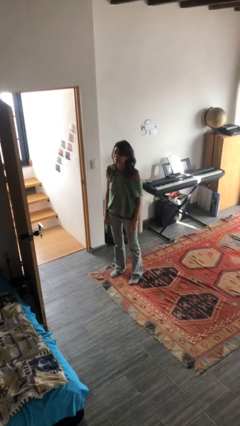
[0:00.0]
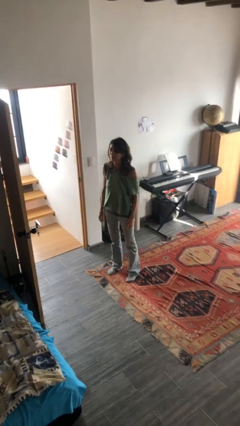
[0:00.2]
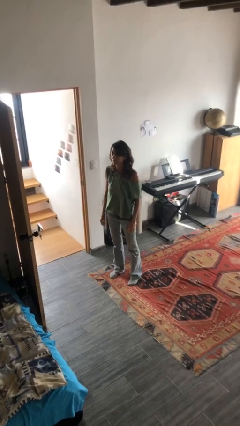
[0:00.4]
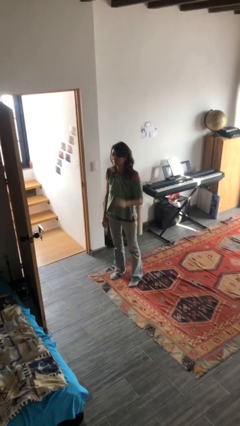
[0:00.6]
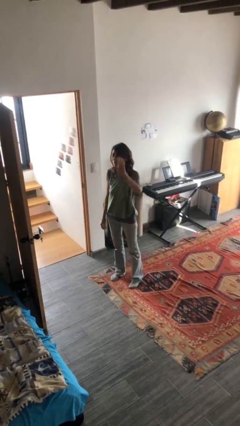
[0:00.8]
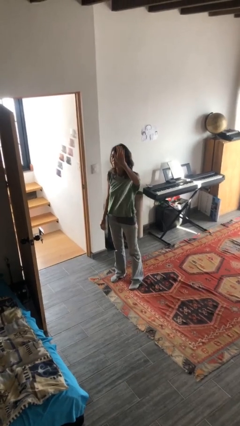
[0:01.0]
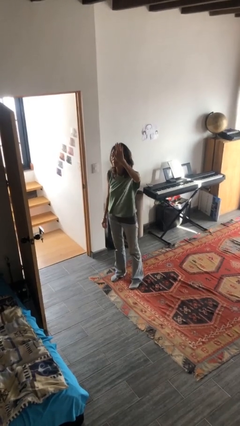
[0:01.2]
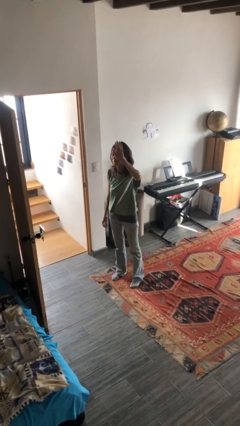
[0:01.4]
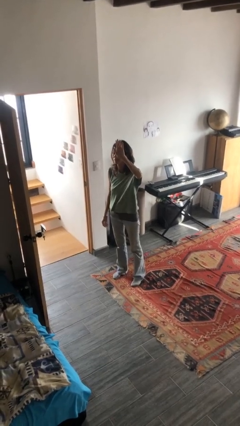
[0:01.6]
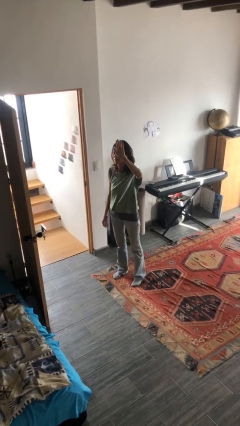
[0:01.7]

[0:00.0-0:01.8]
person gestures raise hand

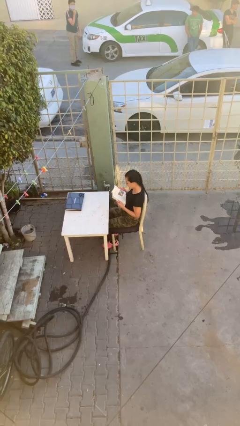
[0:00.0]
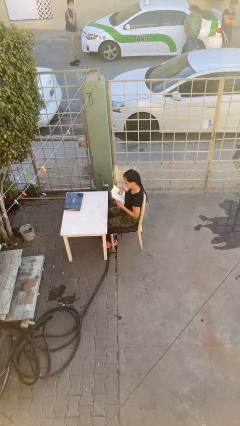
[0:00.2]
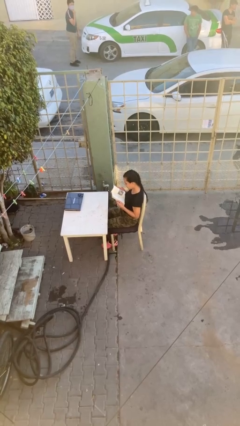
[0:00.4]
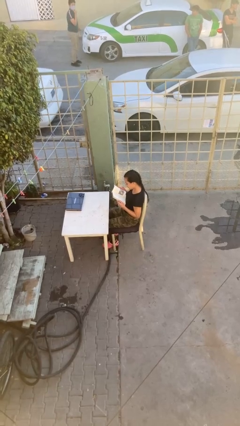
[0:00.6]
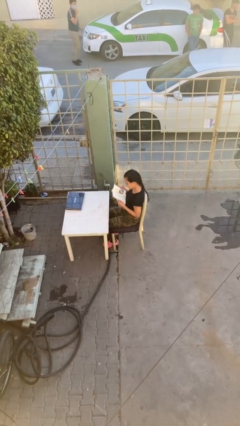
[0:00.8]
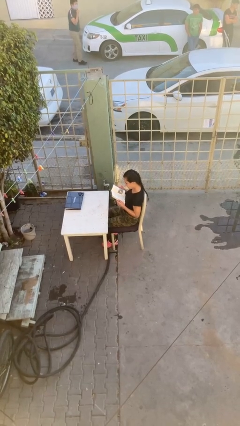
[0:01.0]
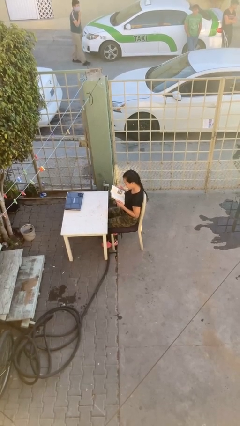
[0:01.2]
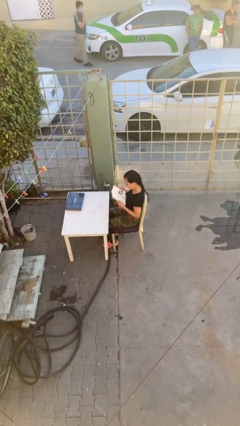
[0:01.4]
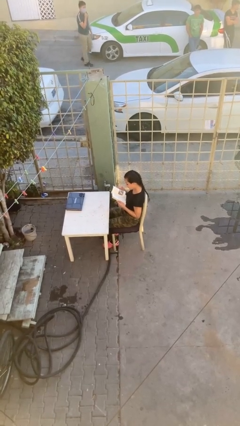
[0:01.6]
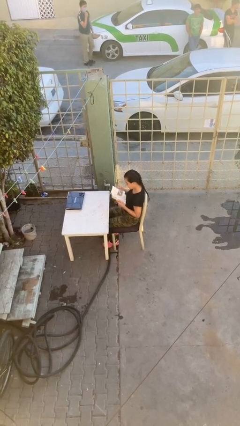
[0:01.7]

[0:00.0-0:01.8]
person reads document

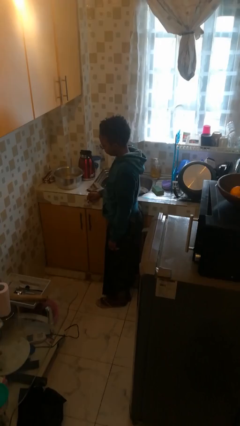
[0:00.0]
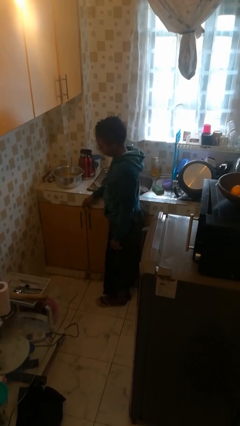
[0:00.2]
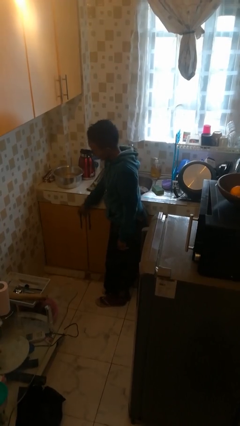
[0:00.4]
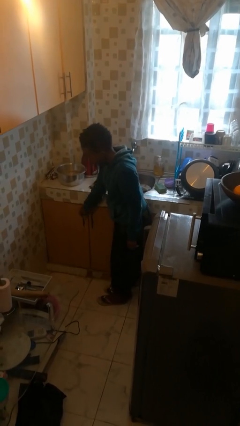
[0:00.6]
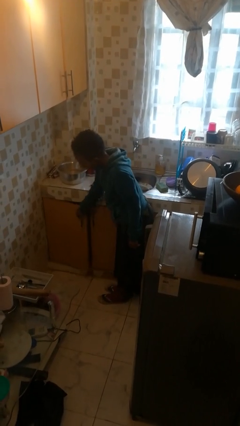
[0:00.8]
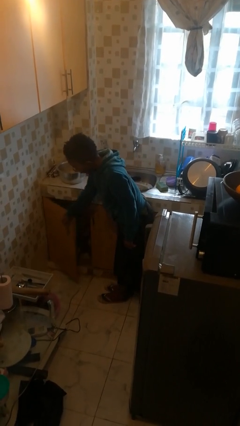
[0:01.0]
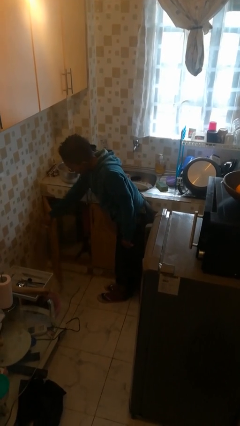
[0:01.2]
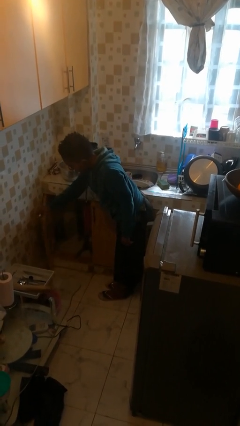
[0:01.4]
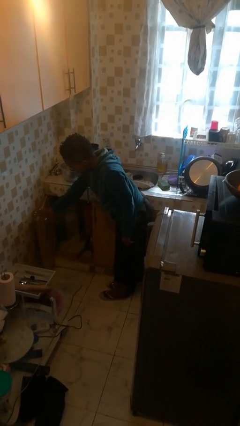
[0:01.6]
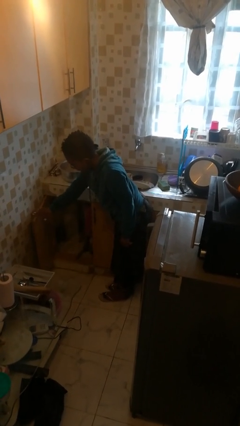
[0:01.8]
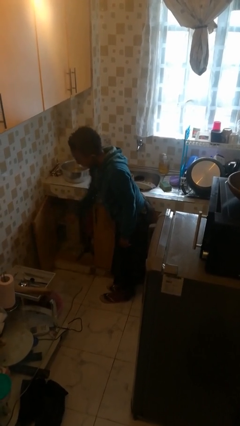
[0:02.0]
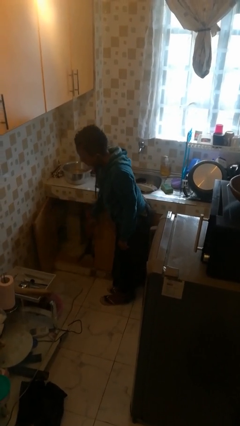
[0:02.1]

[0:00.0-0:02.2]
person opens cabinet

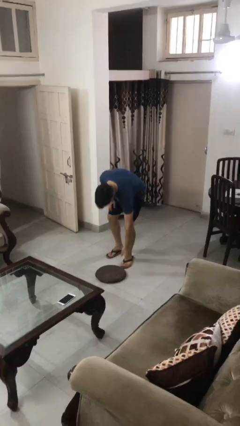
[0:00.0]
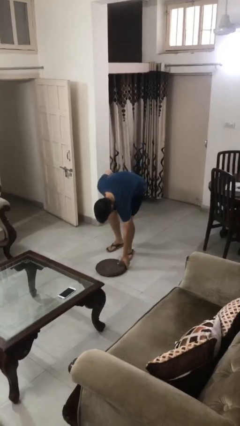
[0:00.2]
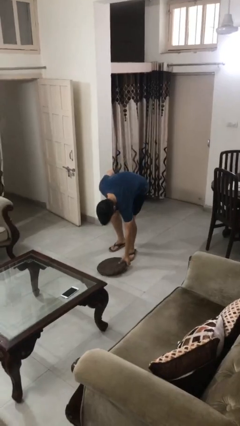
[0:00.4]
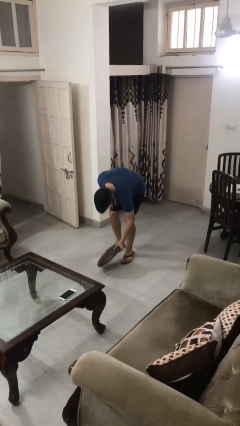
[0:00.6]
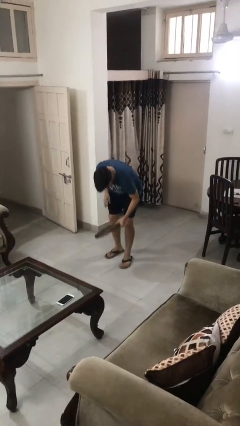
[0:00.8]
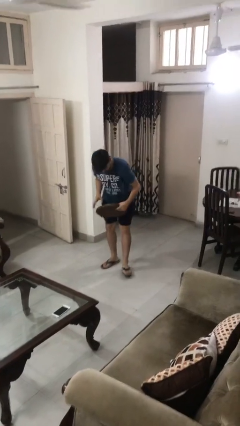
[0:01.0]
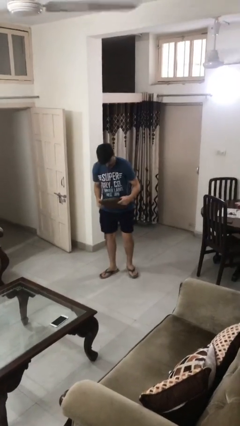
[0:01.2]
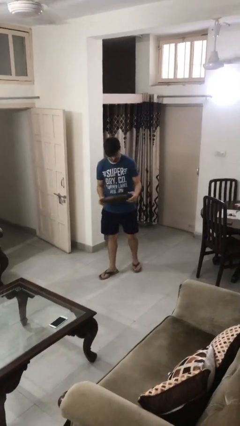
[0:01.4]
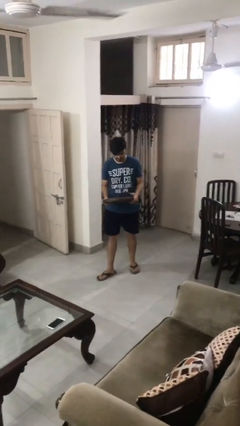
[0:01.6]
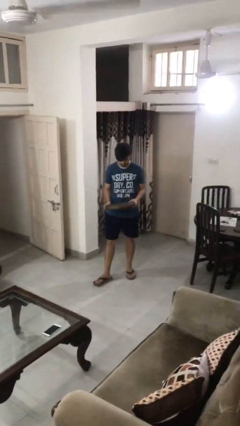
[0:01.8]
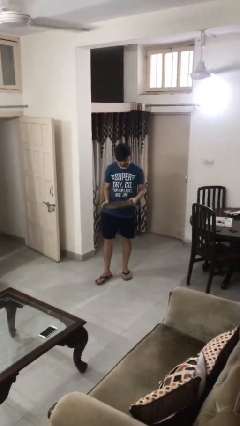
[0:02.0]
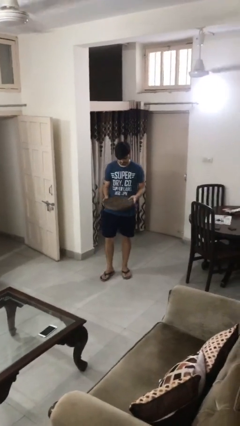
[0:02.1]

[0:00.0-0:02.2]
person picks up object from floor

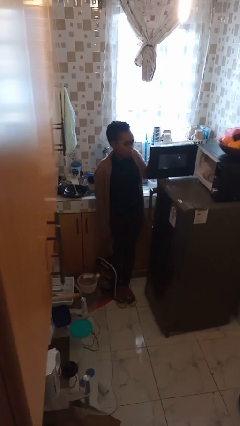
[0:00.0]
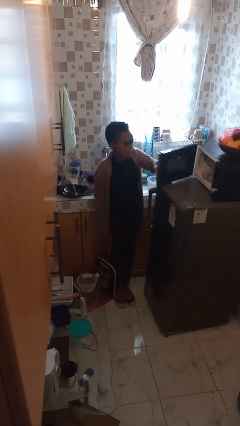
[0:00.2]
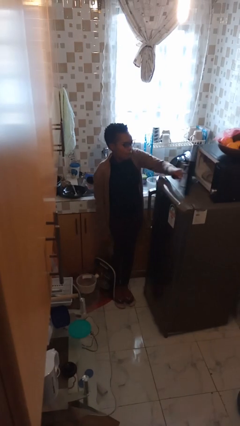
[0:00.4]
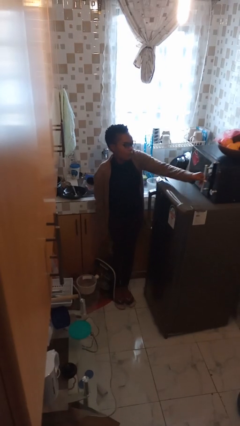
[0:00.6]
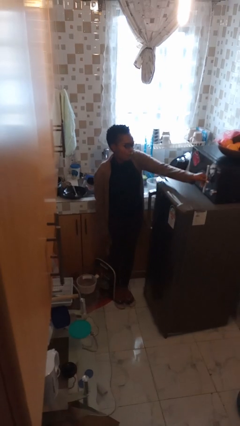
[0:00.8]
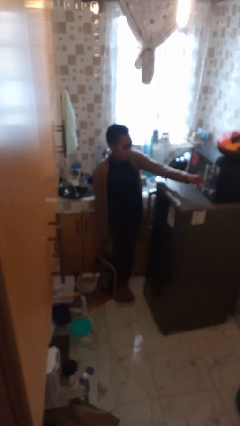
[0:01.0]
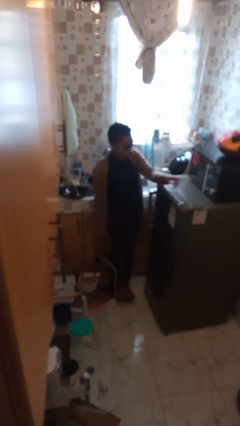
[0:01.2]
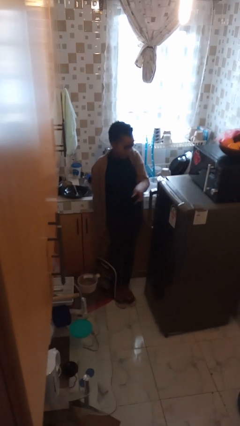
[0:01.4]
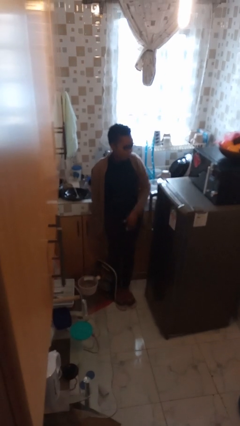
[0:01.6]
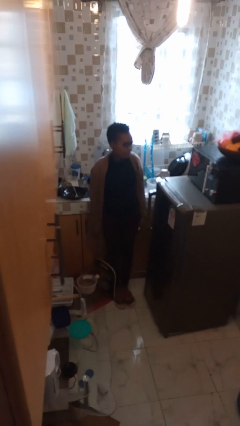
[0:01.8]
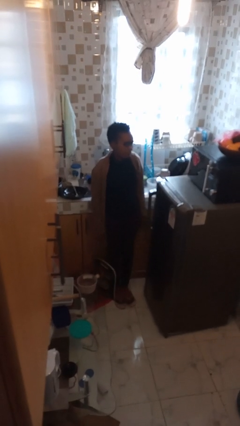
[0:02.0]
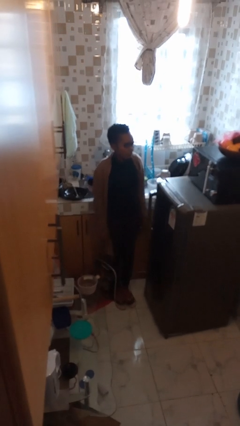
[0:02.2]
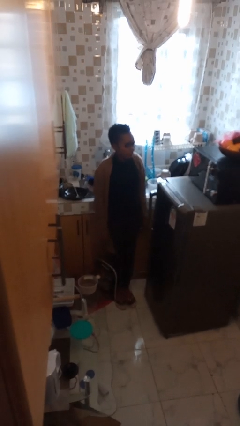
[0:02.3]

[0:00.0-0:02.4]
person closes microwave

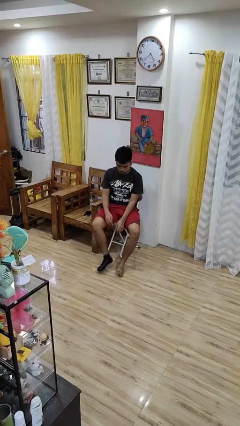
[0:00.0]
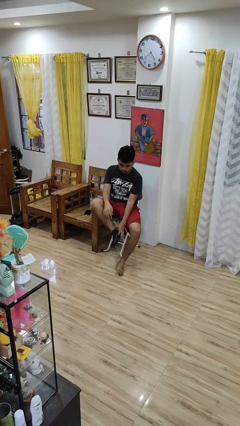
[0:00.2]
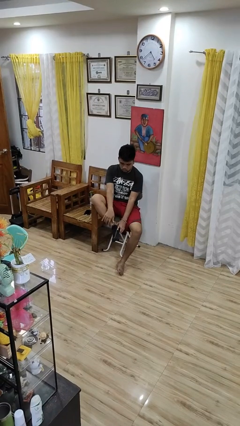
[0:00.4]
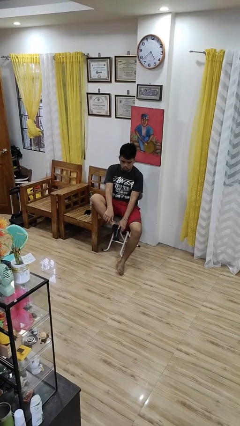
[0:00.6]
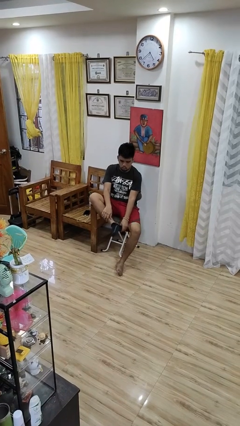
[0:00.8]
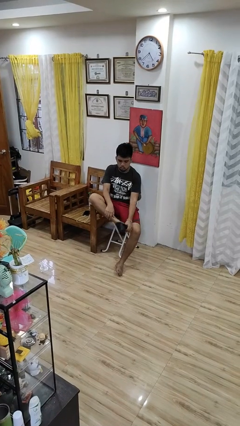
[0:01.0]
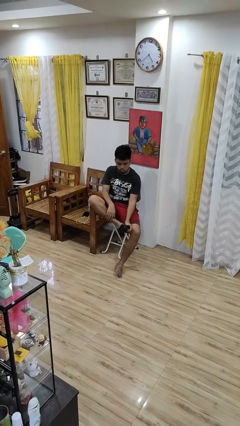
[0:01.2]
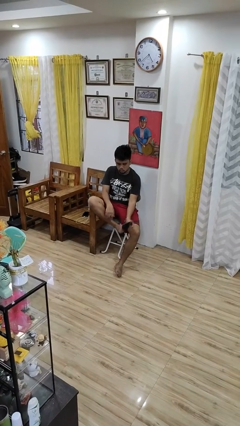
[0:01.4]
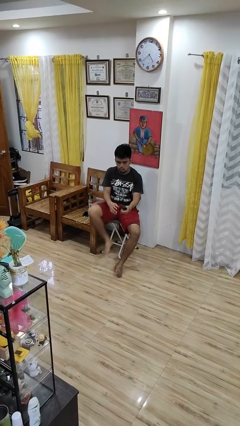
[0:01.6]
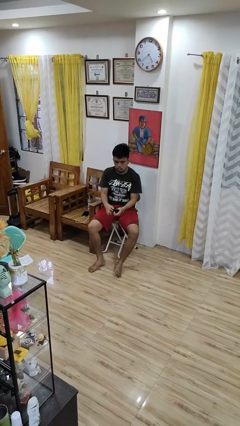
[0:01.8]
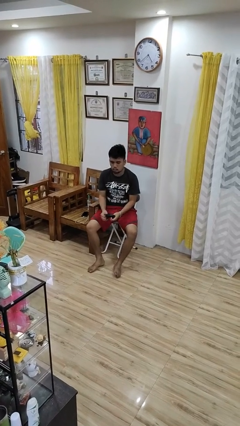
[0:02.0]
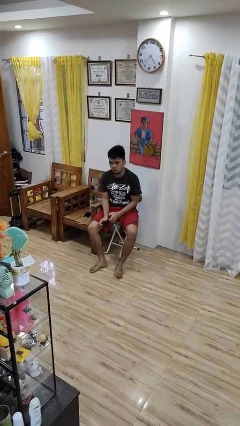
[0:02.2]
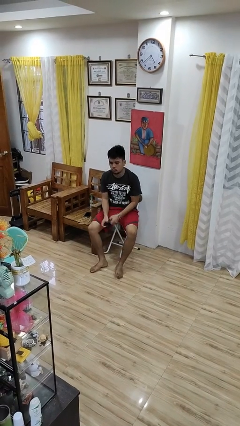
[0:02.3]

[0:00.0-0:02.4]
person takes off socks

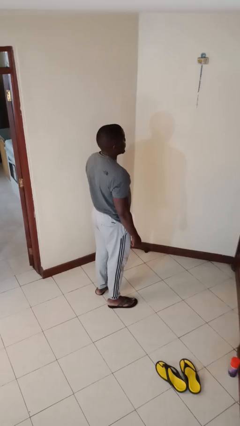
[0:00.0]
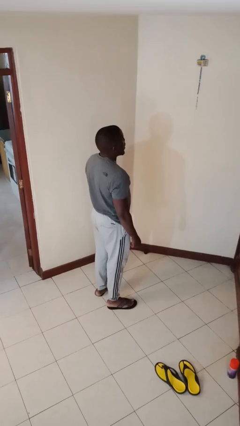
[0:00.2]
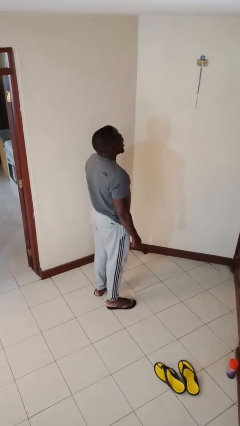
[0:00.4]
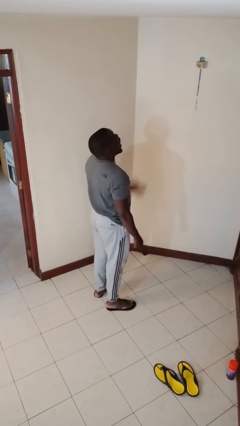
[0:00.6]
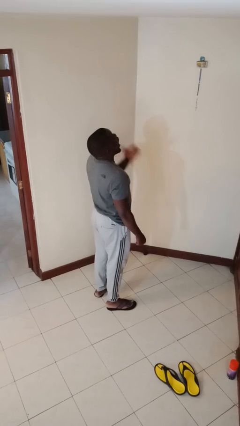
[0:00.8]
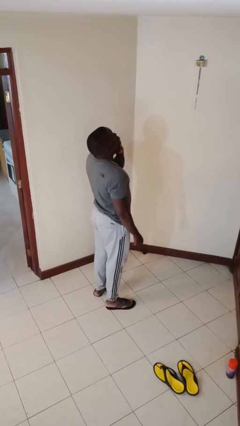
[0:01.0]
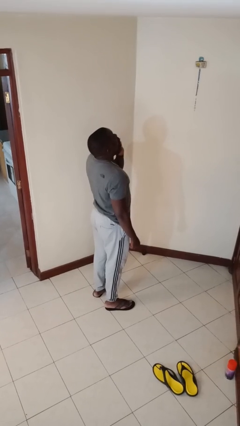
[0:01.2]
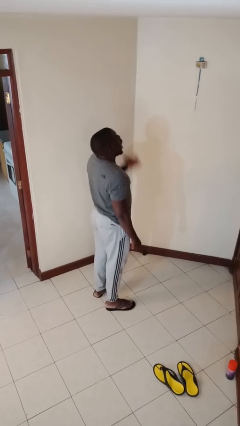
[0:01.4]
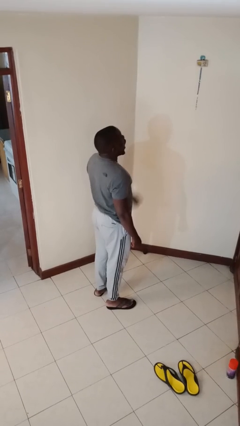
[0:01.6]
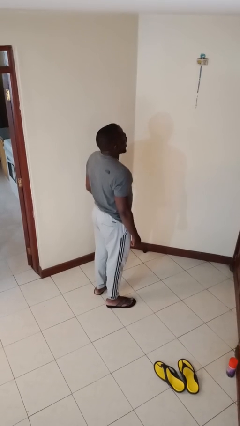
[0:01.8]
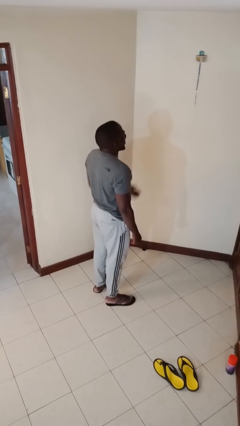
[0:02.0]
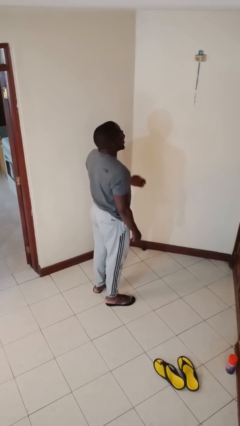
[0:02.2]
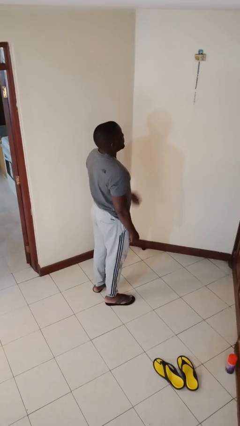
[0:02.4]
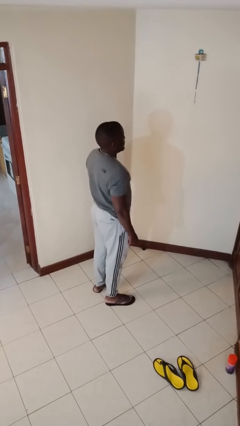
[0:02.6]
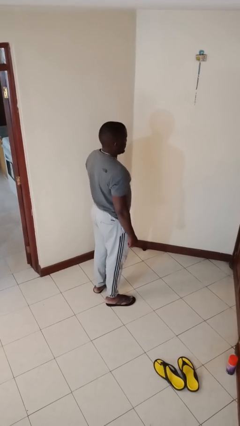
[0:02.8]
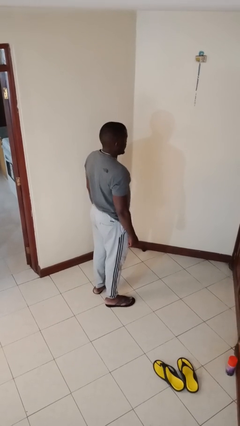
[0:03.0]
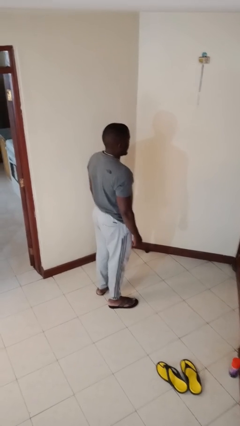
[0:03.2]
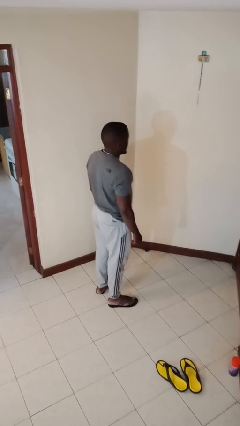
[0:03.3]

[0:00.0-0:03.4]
person yawns

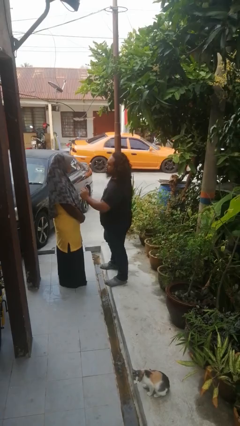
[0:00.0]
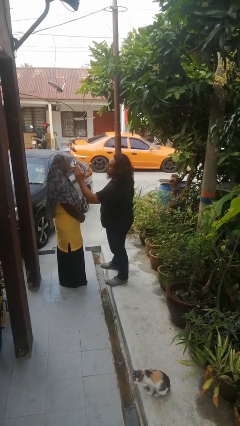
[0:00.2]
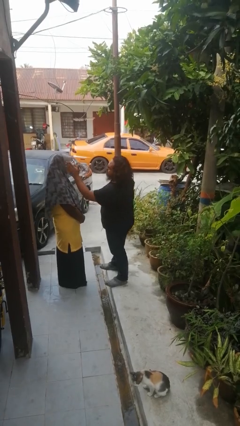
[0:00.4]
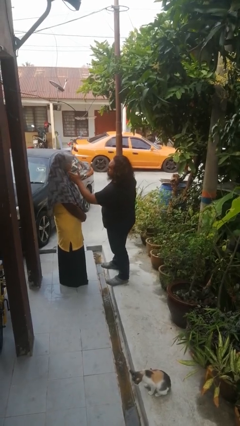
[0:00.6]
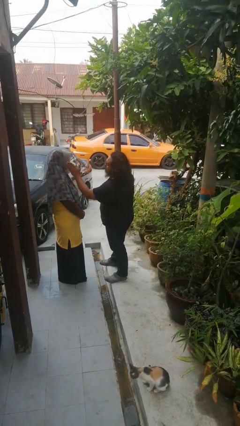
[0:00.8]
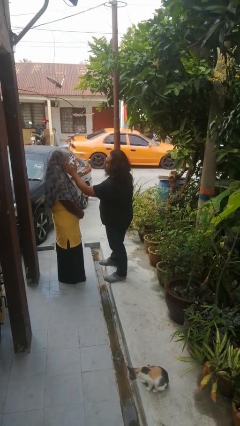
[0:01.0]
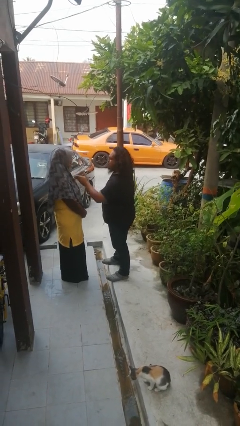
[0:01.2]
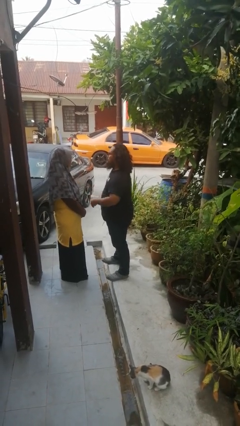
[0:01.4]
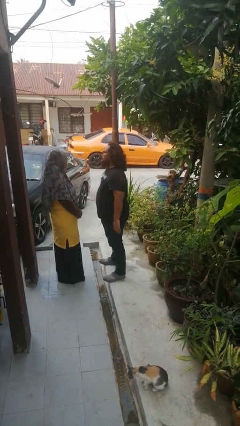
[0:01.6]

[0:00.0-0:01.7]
person touches face of person
